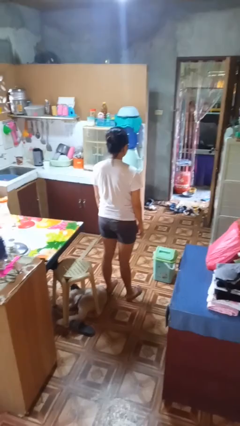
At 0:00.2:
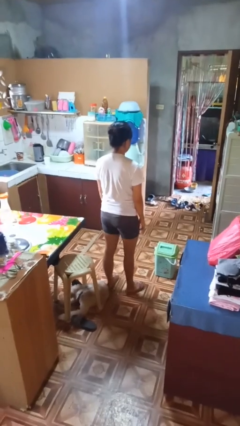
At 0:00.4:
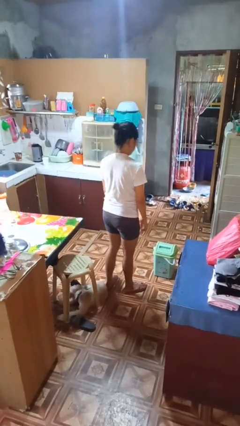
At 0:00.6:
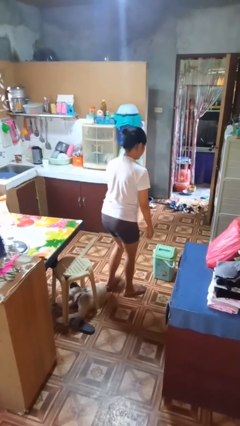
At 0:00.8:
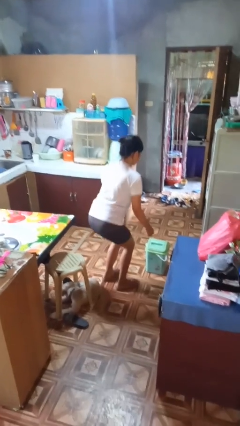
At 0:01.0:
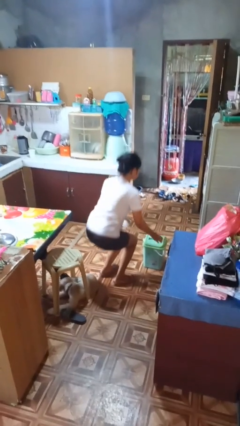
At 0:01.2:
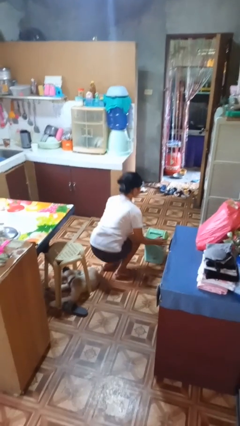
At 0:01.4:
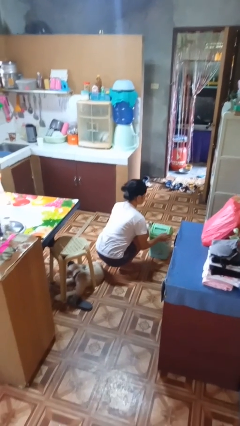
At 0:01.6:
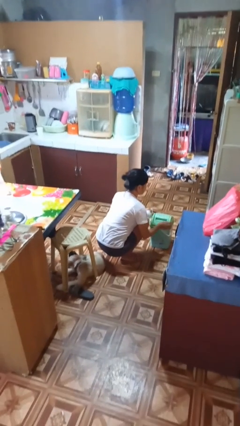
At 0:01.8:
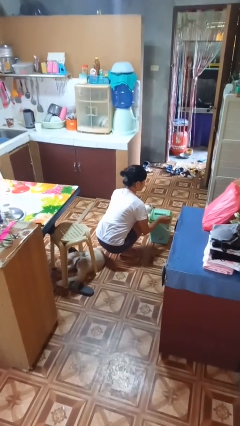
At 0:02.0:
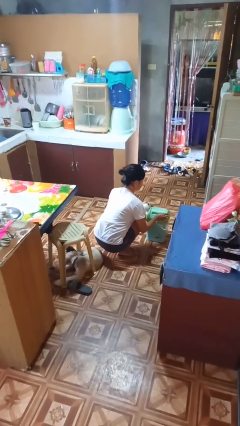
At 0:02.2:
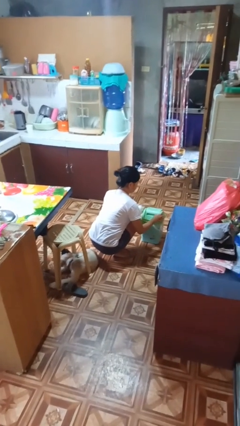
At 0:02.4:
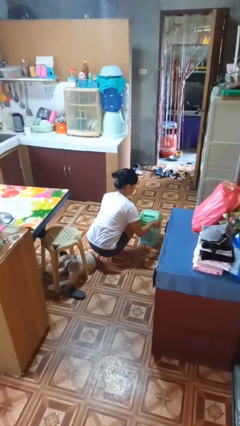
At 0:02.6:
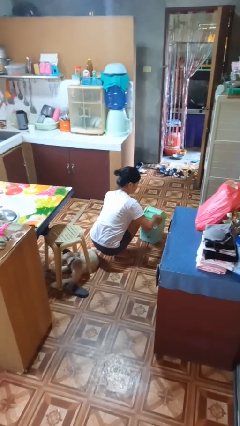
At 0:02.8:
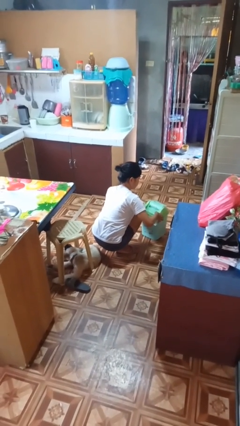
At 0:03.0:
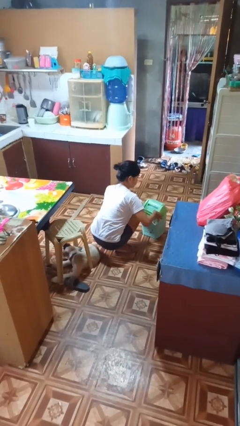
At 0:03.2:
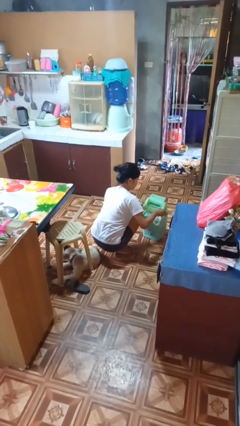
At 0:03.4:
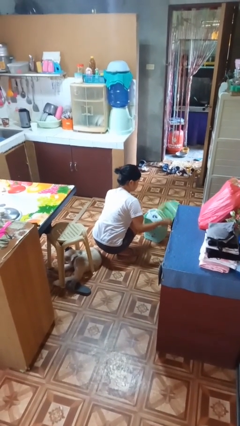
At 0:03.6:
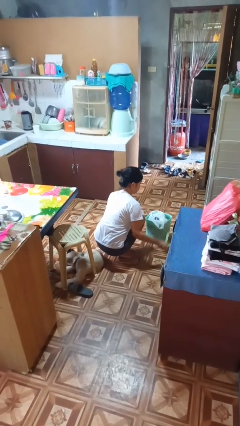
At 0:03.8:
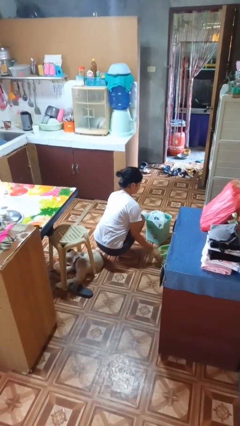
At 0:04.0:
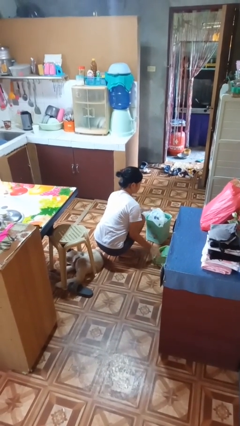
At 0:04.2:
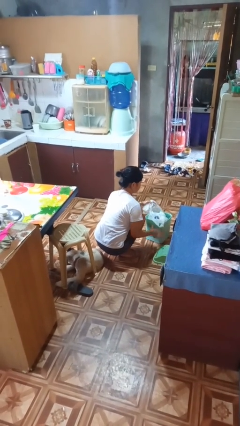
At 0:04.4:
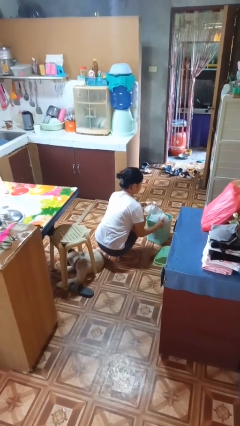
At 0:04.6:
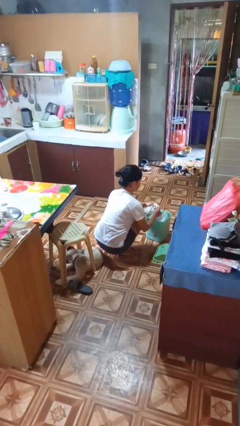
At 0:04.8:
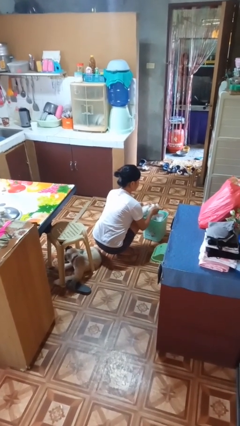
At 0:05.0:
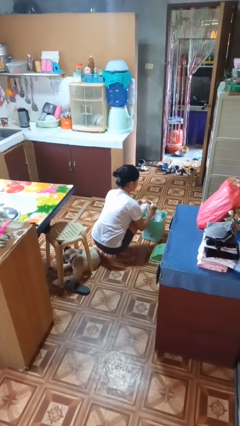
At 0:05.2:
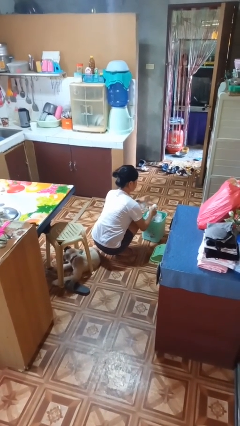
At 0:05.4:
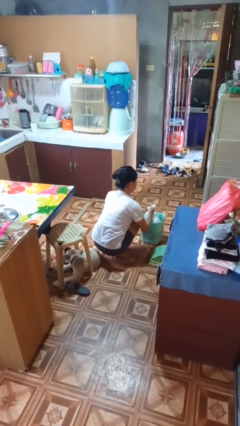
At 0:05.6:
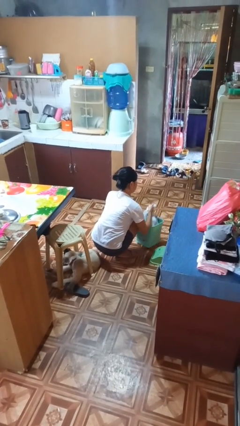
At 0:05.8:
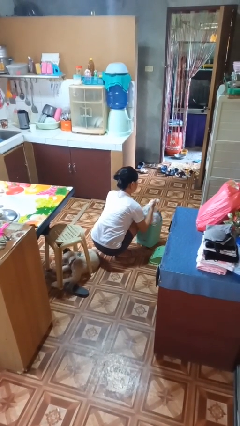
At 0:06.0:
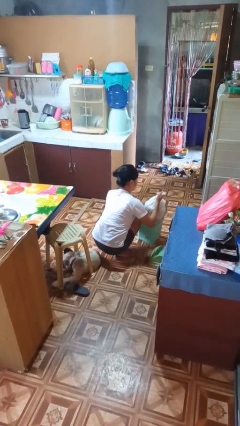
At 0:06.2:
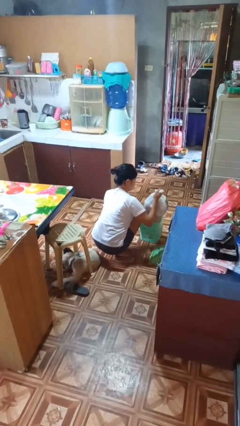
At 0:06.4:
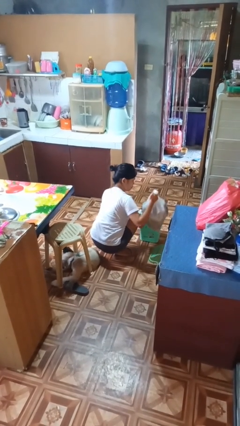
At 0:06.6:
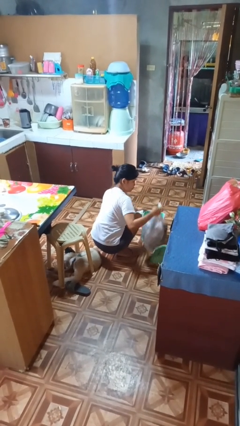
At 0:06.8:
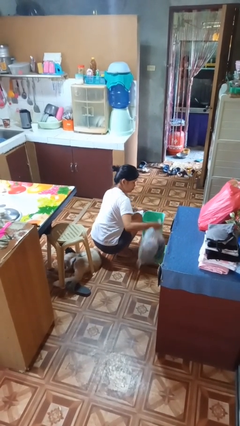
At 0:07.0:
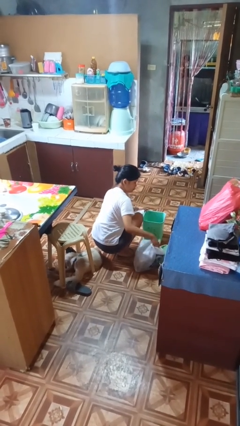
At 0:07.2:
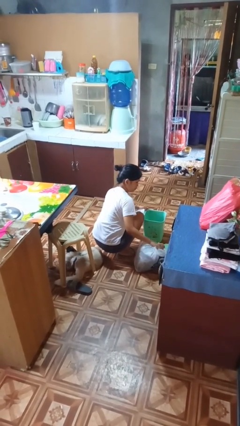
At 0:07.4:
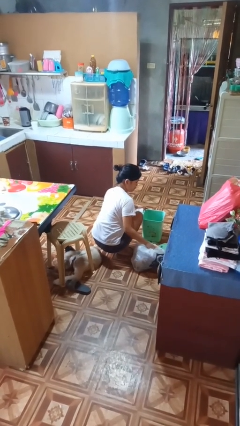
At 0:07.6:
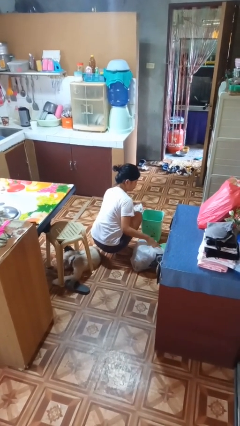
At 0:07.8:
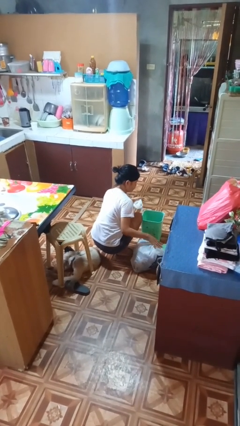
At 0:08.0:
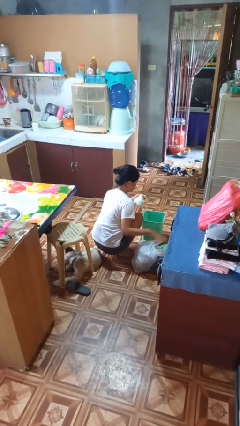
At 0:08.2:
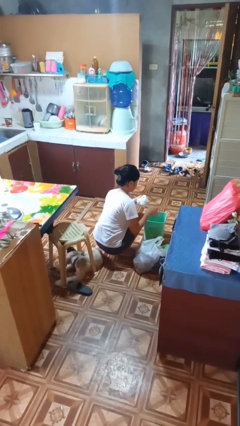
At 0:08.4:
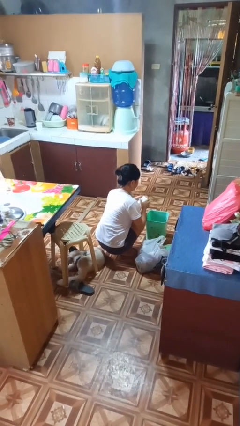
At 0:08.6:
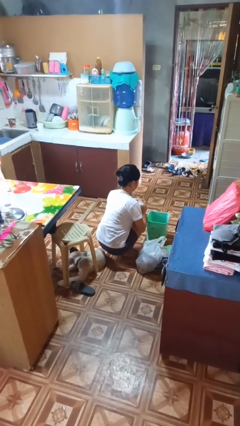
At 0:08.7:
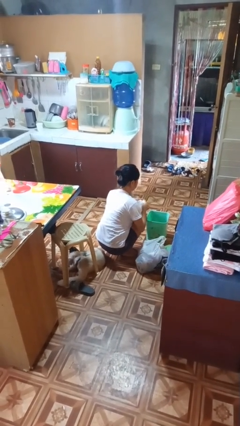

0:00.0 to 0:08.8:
person removes trashbag from trashcan

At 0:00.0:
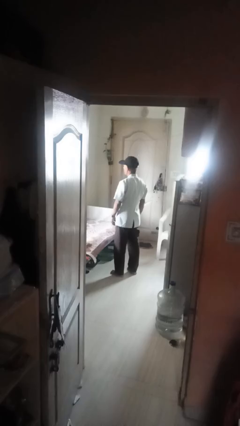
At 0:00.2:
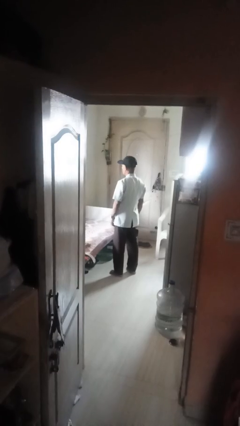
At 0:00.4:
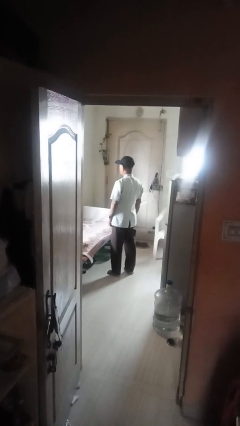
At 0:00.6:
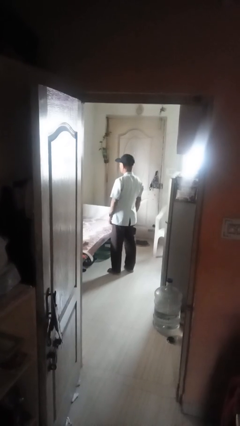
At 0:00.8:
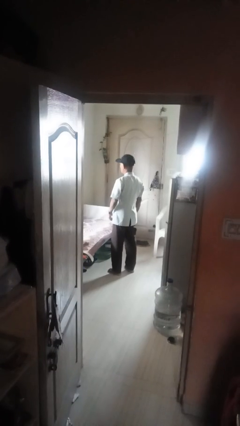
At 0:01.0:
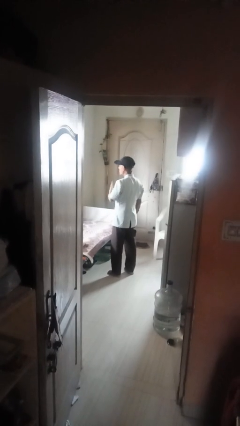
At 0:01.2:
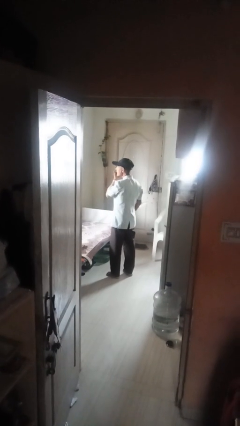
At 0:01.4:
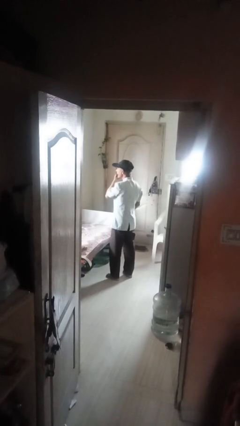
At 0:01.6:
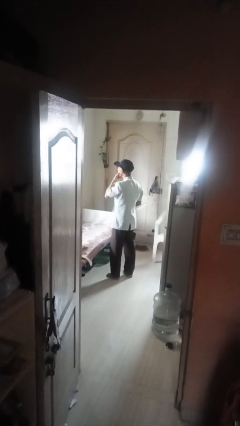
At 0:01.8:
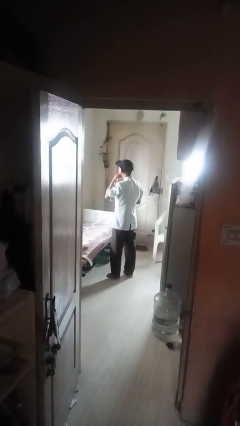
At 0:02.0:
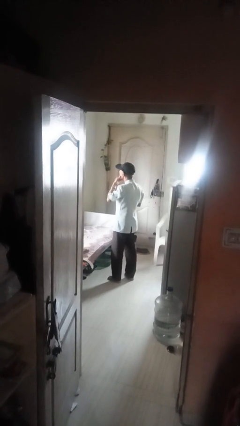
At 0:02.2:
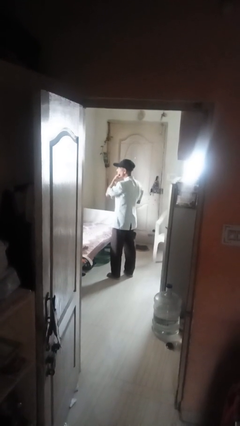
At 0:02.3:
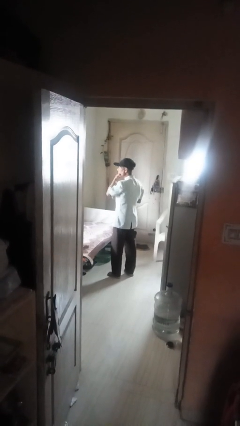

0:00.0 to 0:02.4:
person strokes chin

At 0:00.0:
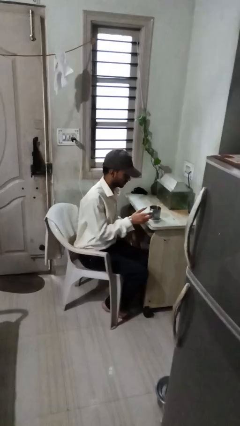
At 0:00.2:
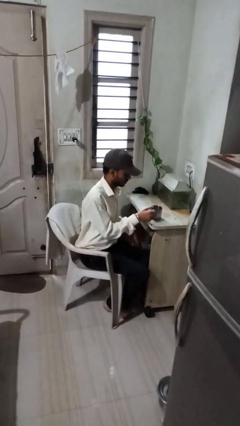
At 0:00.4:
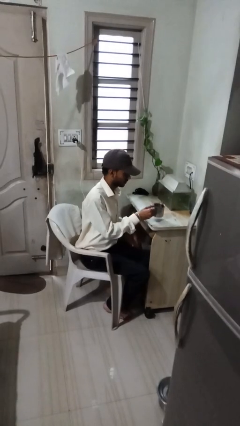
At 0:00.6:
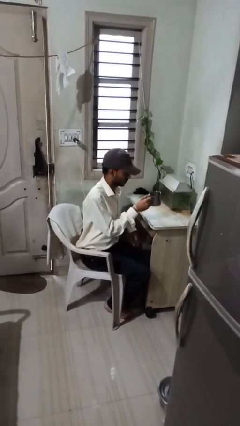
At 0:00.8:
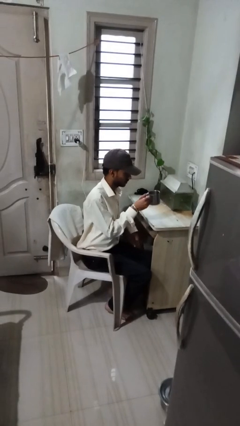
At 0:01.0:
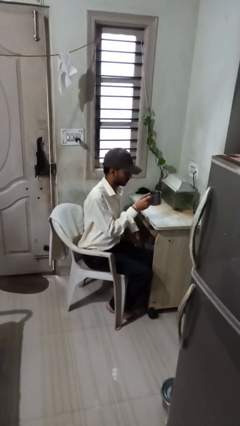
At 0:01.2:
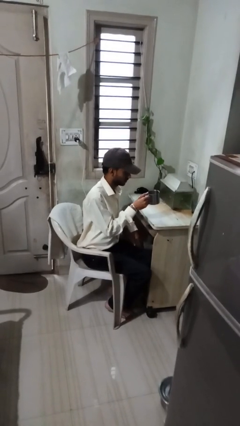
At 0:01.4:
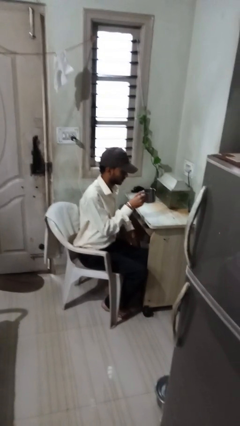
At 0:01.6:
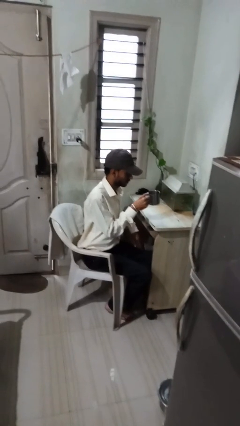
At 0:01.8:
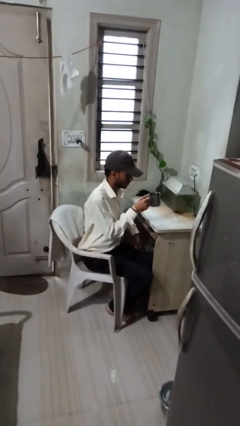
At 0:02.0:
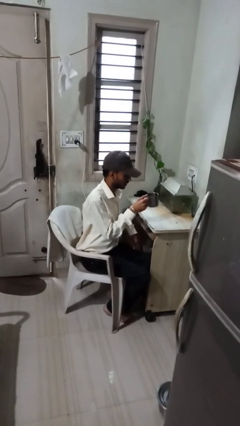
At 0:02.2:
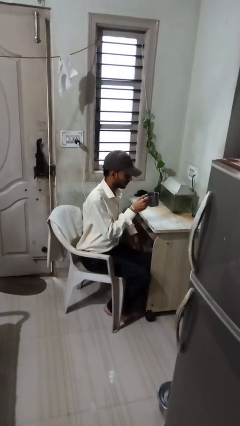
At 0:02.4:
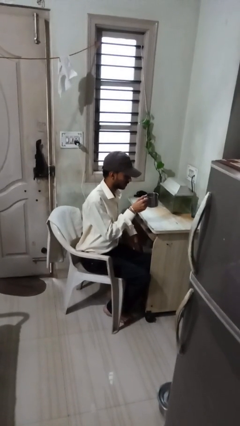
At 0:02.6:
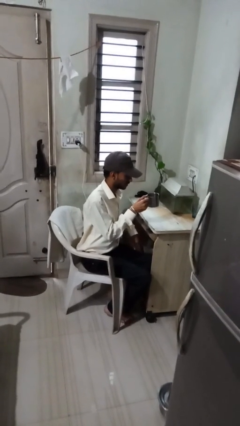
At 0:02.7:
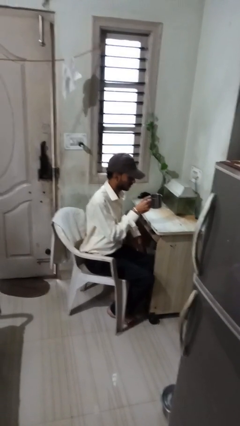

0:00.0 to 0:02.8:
person picks up object from table

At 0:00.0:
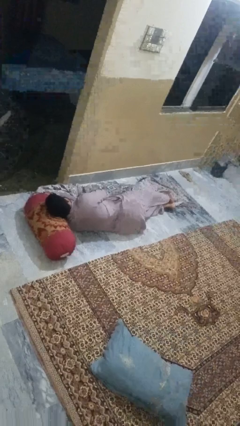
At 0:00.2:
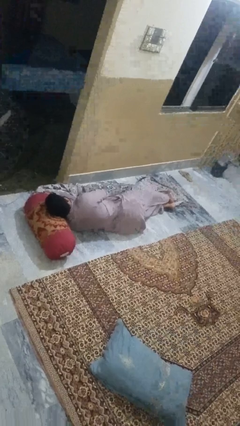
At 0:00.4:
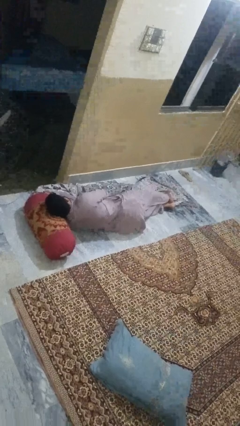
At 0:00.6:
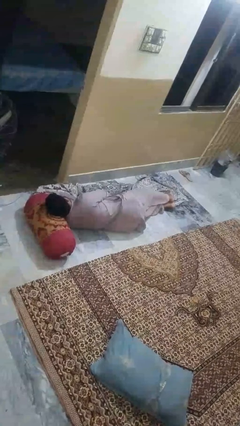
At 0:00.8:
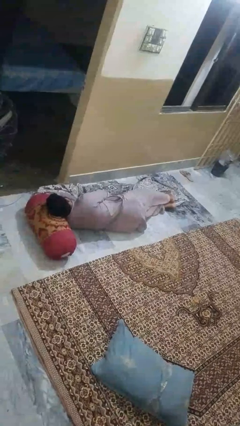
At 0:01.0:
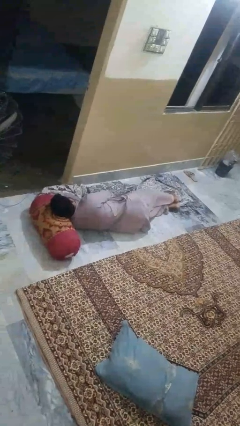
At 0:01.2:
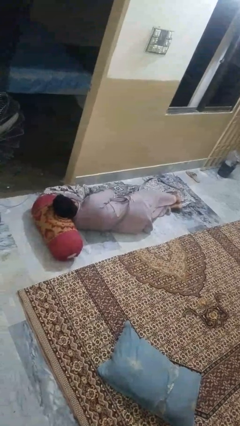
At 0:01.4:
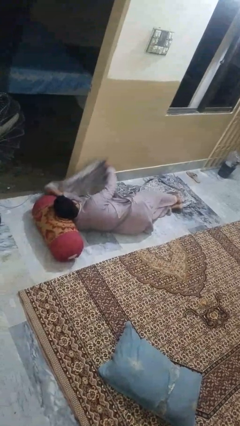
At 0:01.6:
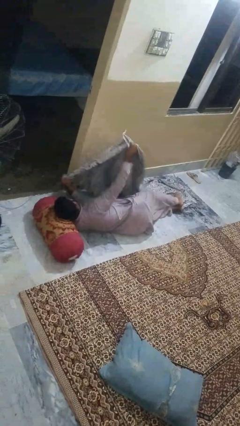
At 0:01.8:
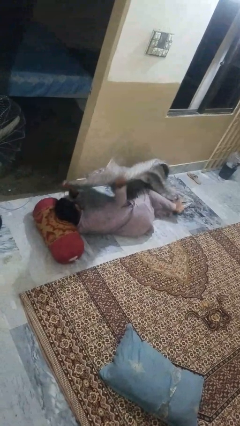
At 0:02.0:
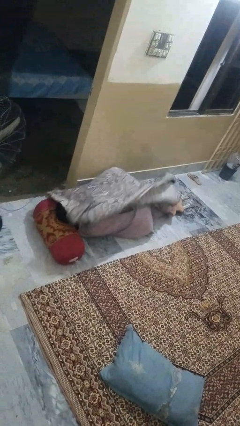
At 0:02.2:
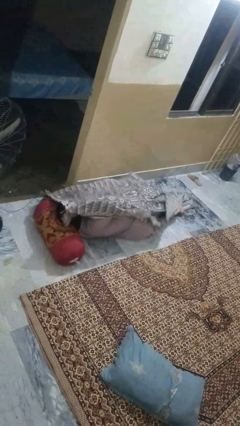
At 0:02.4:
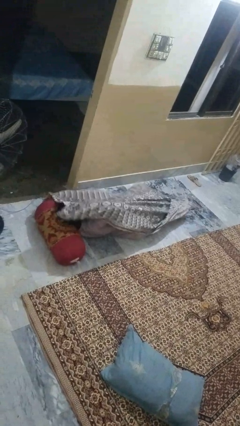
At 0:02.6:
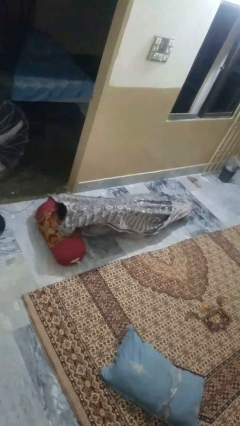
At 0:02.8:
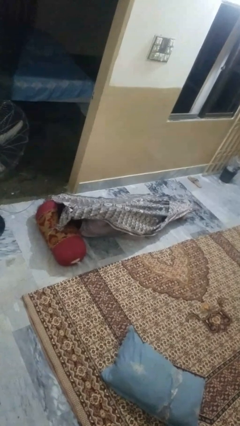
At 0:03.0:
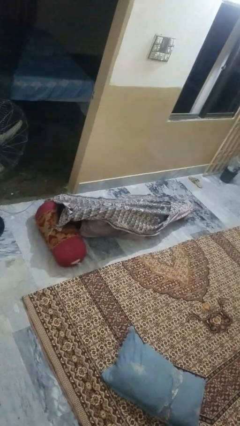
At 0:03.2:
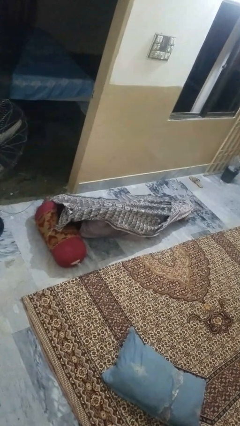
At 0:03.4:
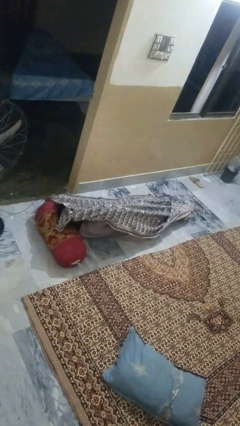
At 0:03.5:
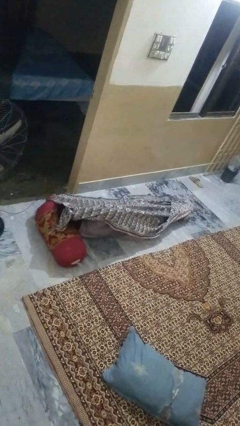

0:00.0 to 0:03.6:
person covers with blanket
